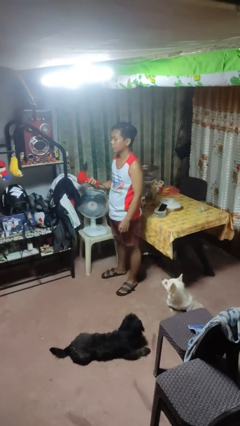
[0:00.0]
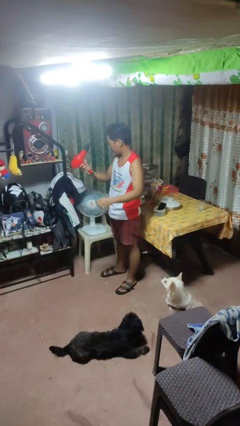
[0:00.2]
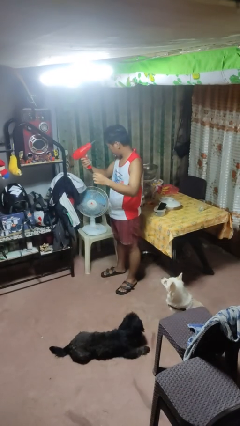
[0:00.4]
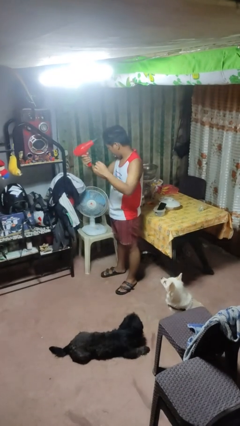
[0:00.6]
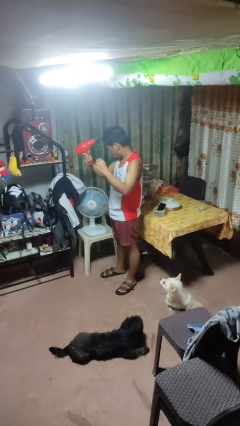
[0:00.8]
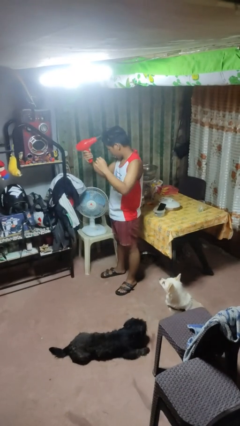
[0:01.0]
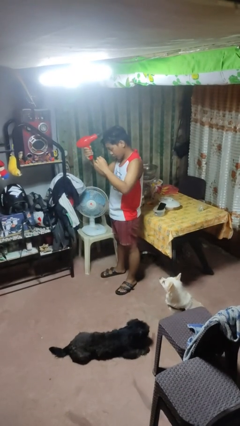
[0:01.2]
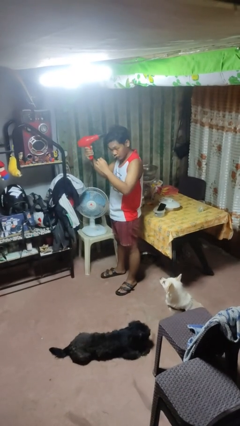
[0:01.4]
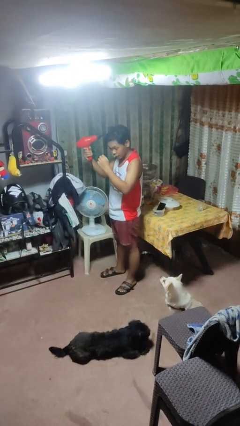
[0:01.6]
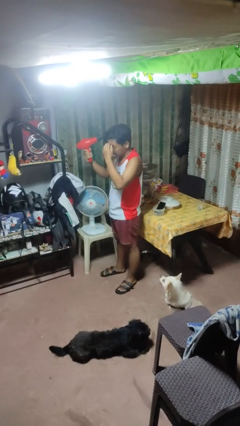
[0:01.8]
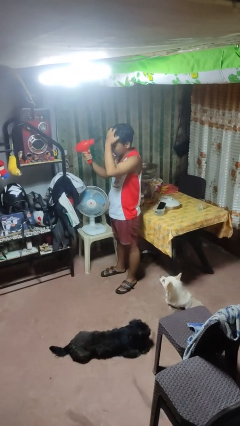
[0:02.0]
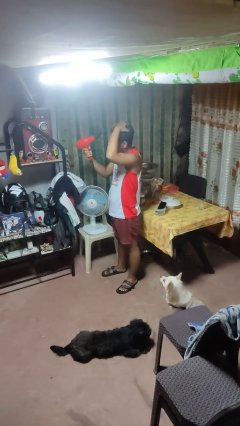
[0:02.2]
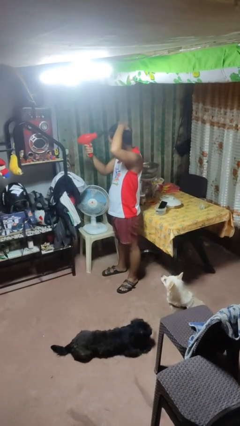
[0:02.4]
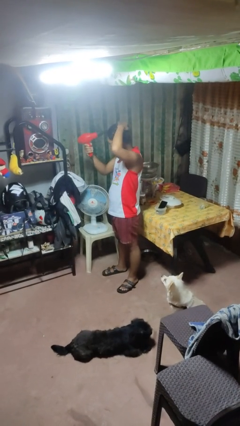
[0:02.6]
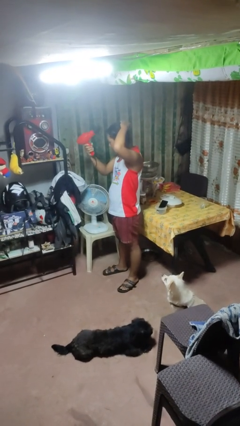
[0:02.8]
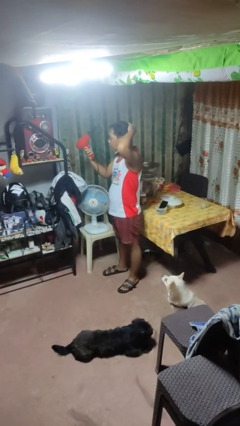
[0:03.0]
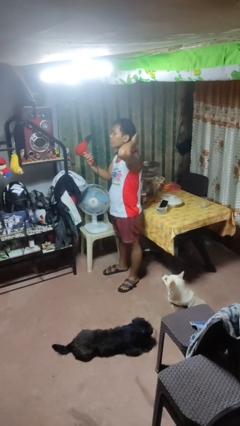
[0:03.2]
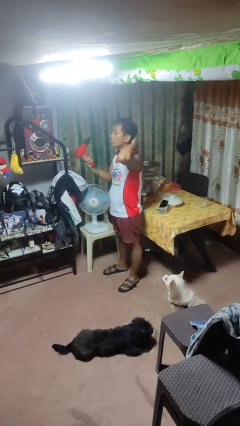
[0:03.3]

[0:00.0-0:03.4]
person dries hair with hairdryer

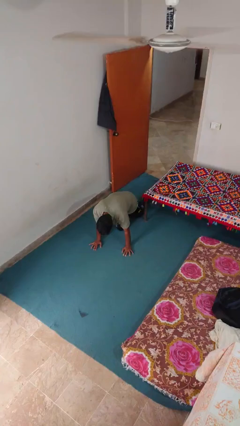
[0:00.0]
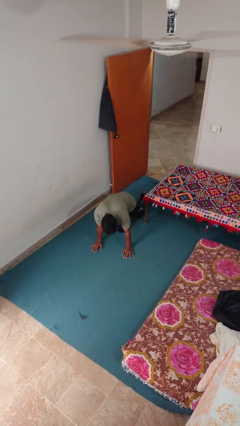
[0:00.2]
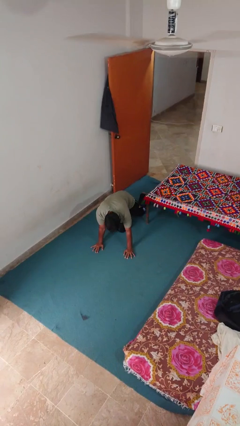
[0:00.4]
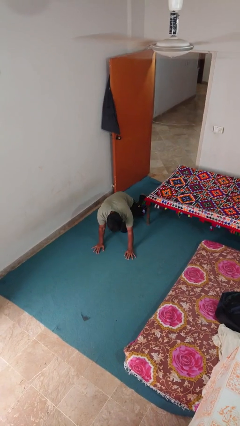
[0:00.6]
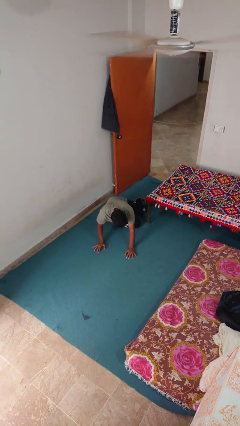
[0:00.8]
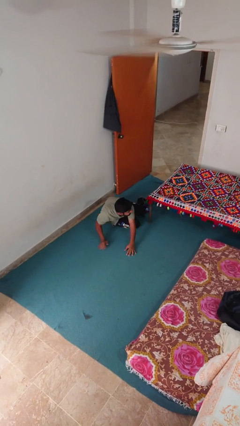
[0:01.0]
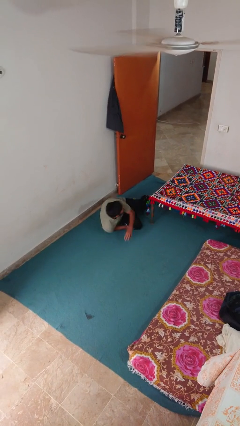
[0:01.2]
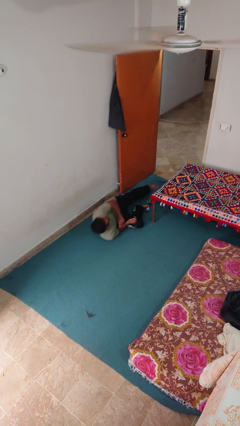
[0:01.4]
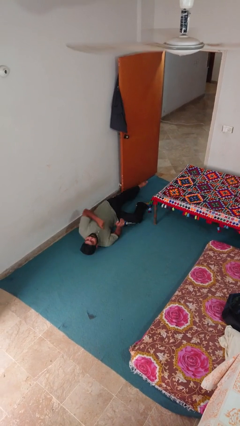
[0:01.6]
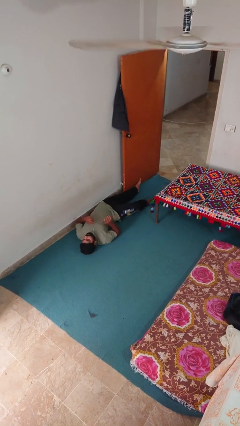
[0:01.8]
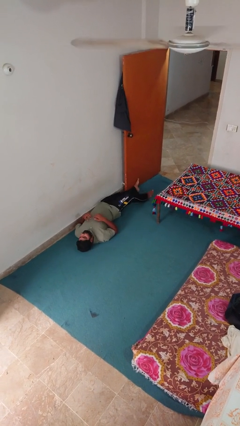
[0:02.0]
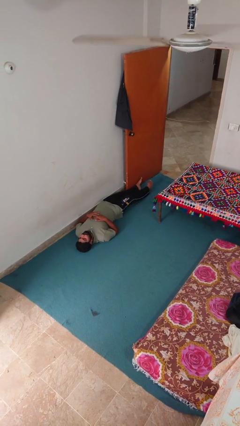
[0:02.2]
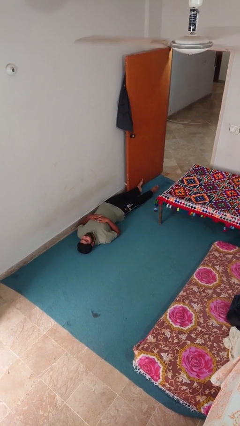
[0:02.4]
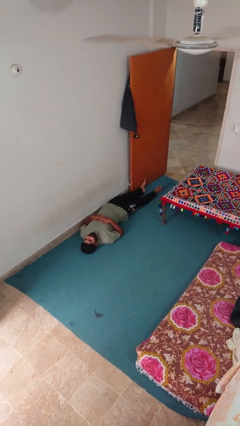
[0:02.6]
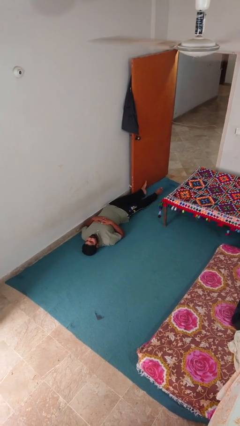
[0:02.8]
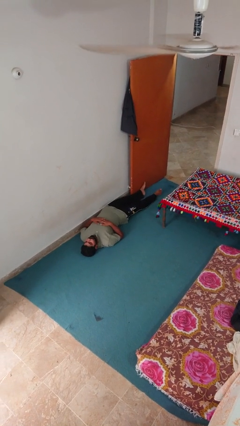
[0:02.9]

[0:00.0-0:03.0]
person lies down on floor

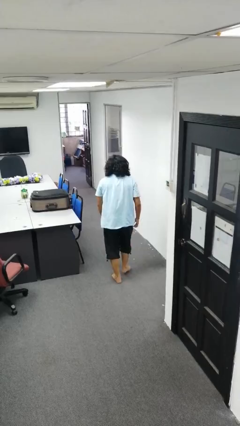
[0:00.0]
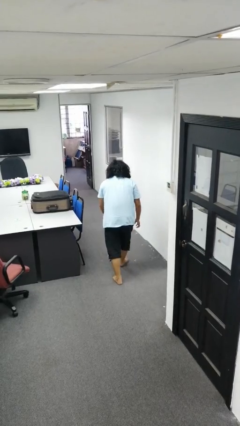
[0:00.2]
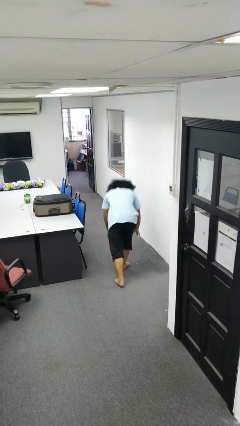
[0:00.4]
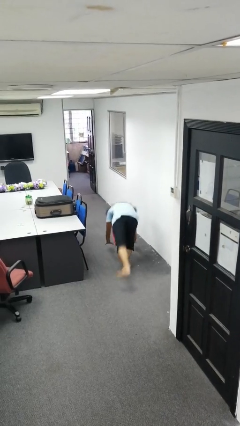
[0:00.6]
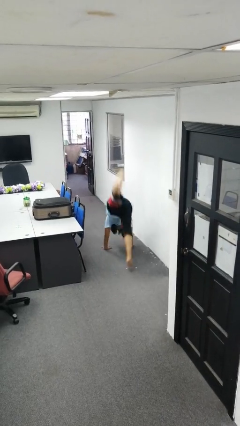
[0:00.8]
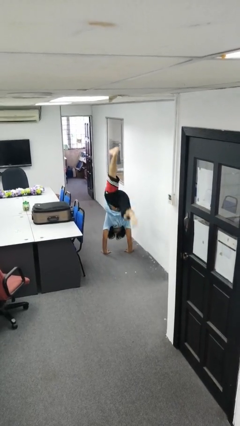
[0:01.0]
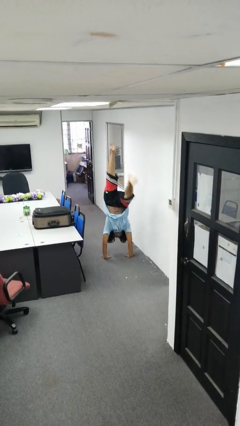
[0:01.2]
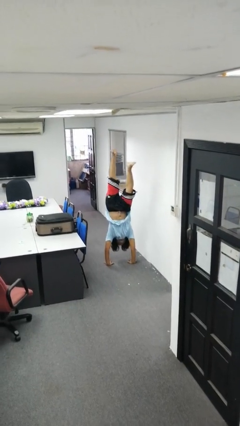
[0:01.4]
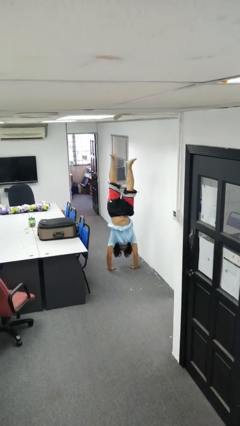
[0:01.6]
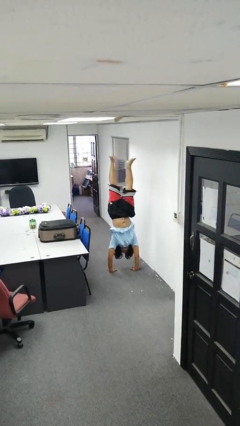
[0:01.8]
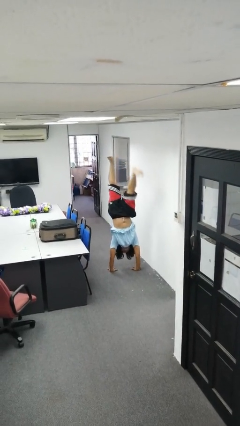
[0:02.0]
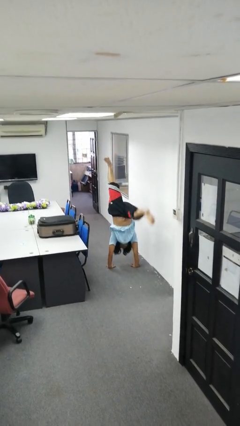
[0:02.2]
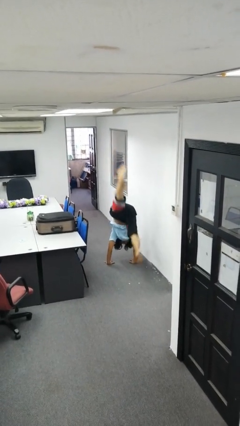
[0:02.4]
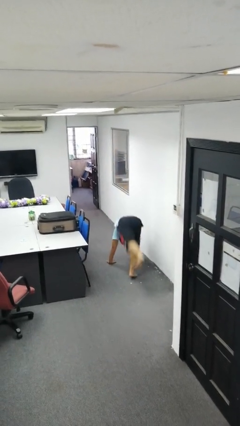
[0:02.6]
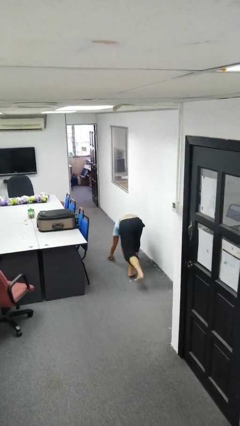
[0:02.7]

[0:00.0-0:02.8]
person handstand

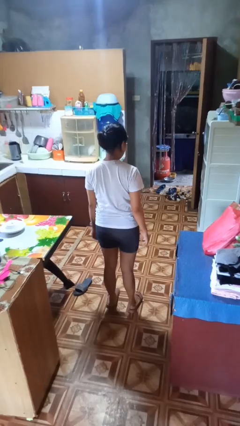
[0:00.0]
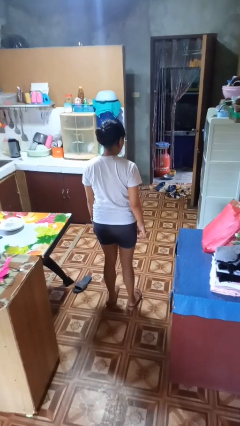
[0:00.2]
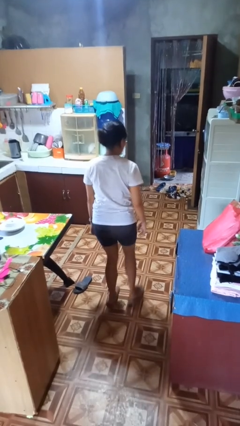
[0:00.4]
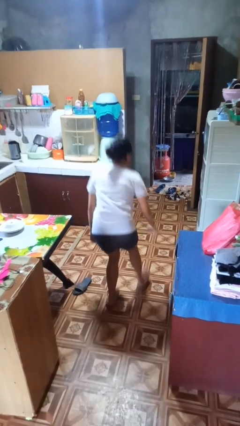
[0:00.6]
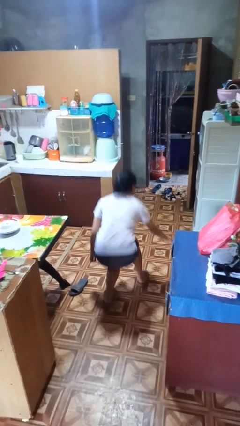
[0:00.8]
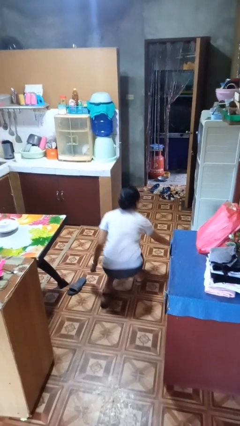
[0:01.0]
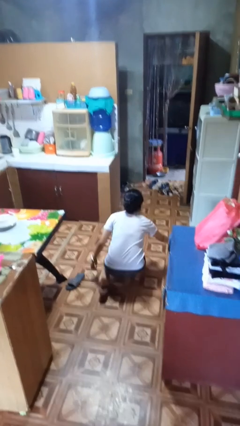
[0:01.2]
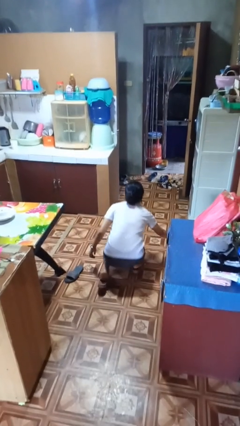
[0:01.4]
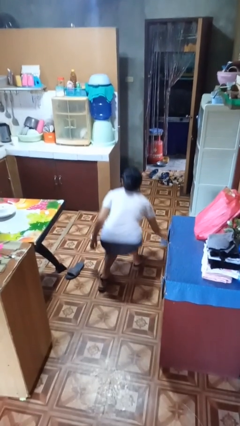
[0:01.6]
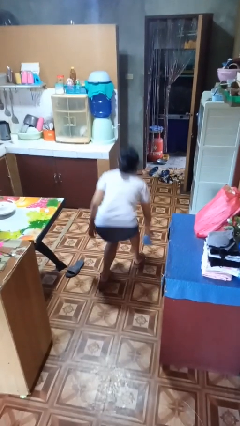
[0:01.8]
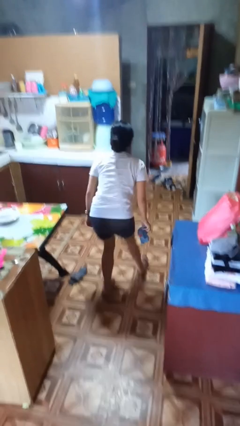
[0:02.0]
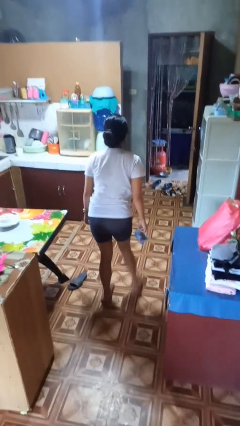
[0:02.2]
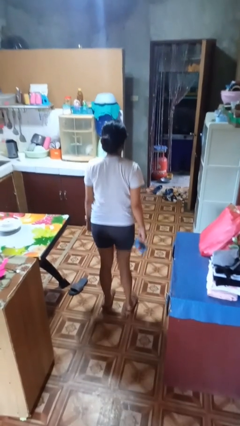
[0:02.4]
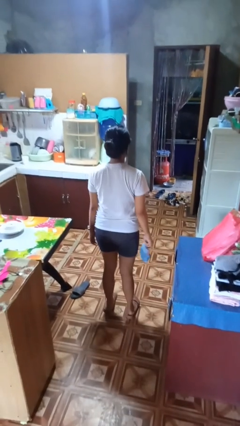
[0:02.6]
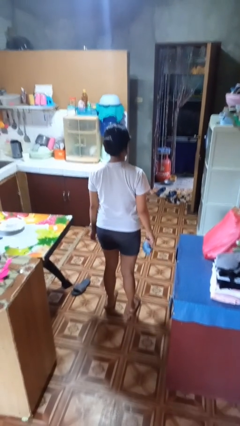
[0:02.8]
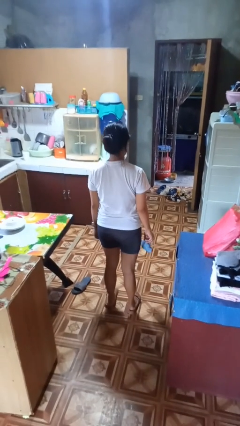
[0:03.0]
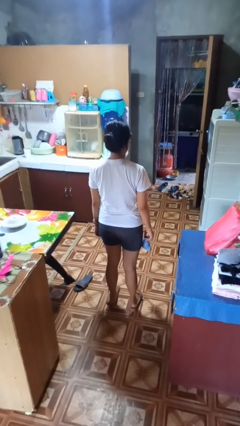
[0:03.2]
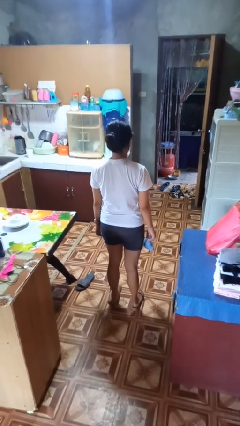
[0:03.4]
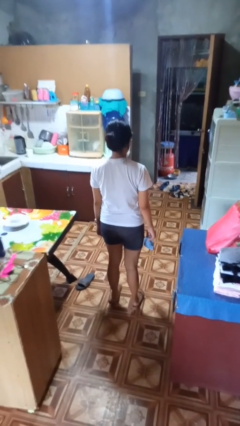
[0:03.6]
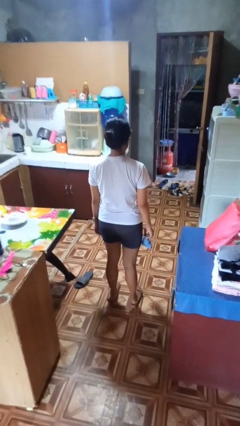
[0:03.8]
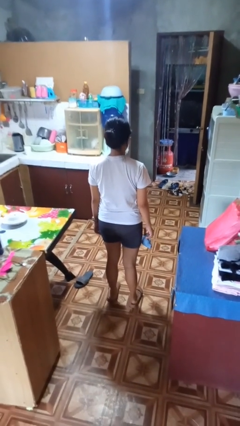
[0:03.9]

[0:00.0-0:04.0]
person picks up object from floor

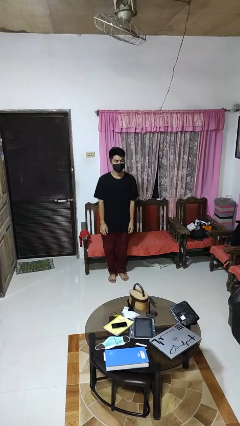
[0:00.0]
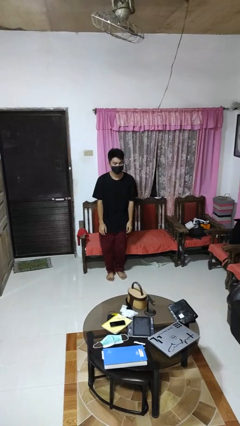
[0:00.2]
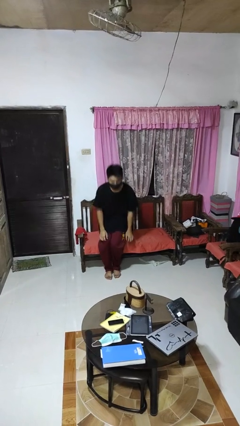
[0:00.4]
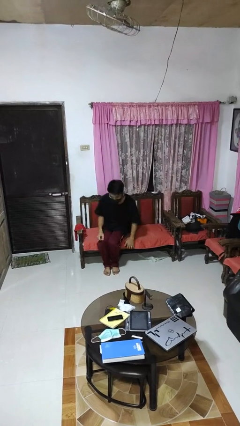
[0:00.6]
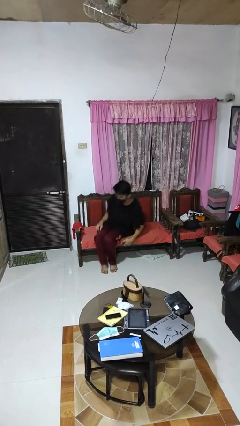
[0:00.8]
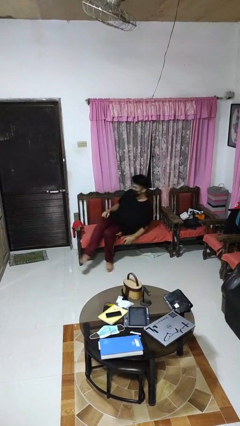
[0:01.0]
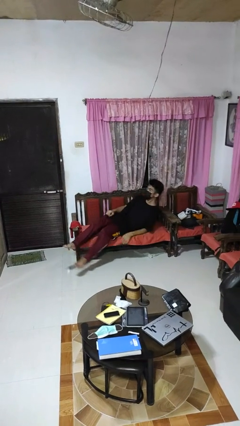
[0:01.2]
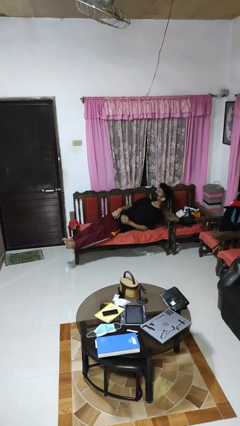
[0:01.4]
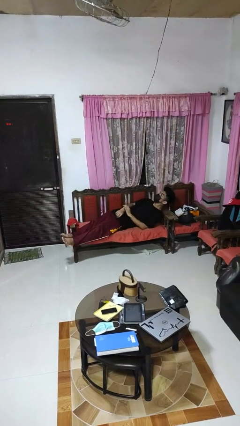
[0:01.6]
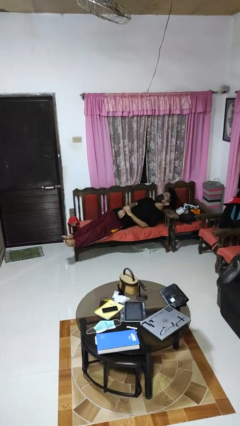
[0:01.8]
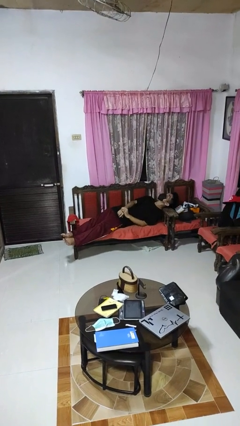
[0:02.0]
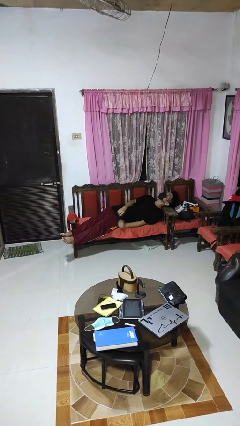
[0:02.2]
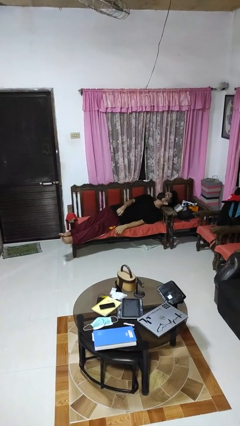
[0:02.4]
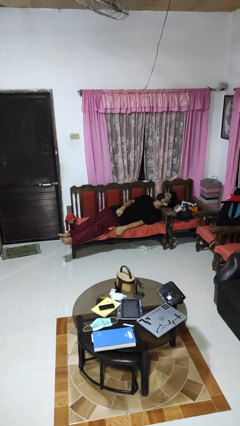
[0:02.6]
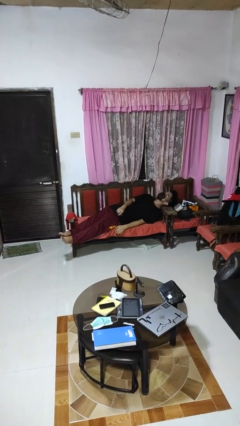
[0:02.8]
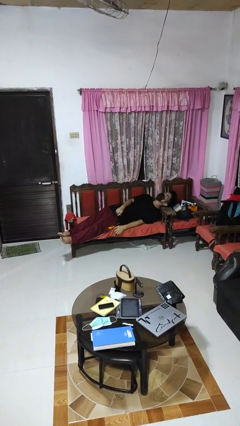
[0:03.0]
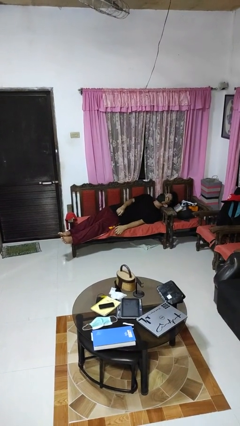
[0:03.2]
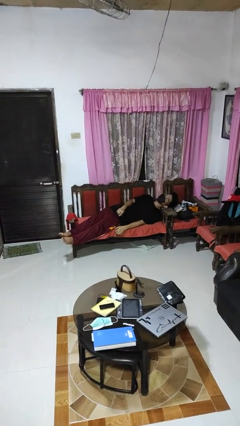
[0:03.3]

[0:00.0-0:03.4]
person lies down on couch

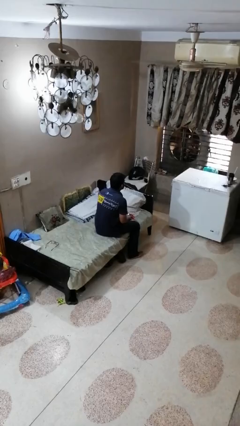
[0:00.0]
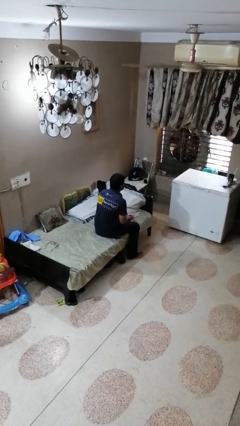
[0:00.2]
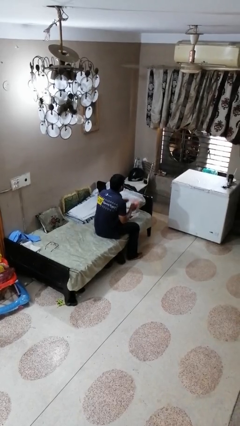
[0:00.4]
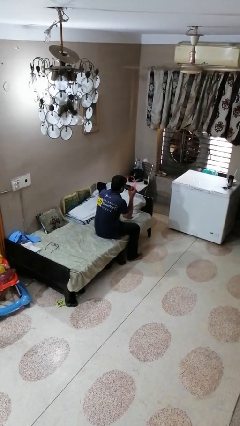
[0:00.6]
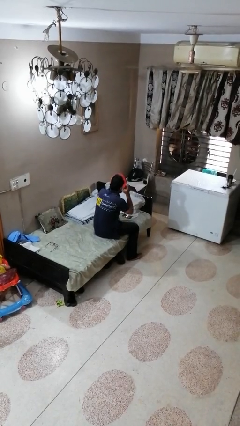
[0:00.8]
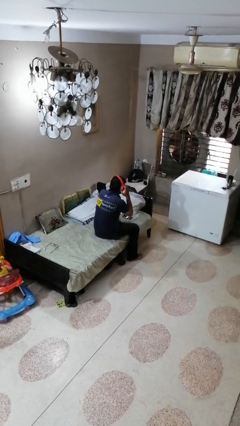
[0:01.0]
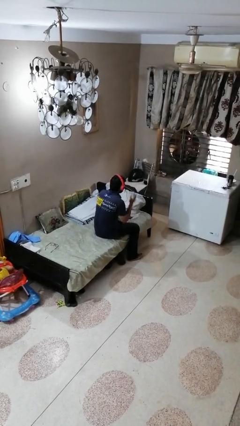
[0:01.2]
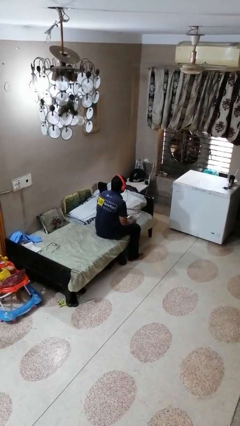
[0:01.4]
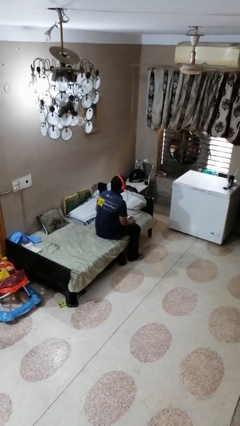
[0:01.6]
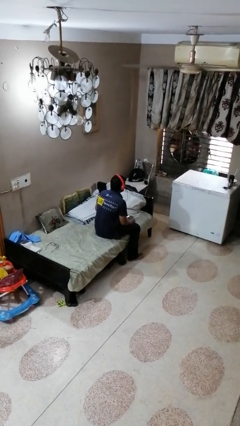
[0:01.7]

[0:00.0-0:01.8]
person puts on headphones
